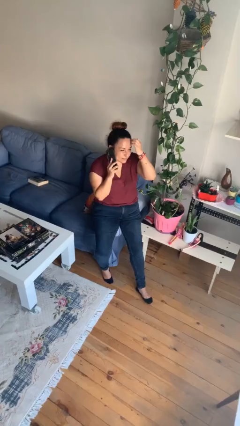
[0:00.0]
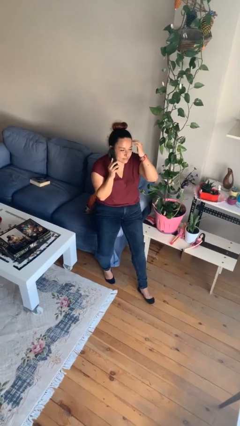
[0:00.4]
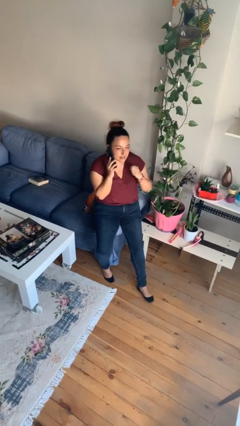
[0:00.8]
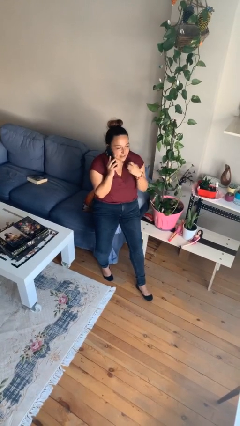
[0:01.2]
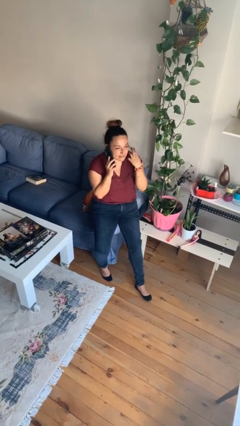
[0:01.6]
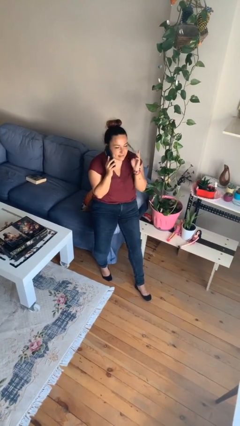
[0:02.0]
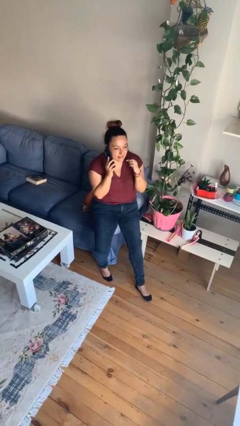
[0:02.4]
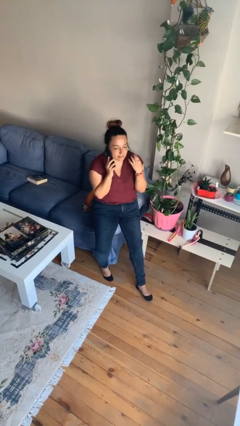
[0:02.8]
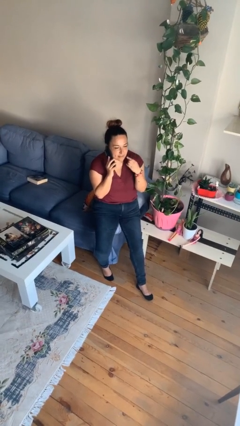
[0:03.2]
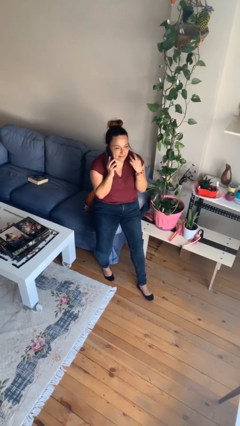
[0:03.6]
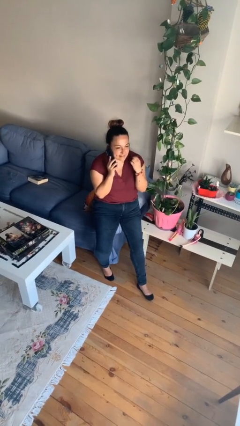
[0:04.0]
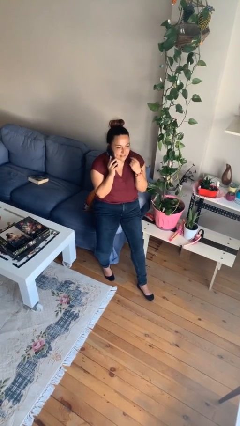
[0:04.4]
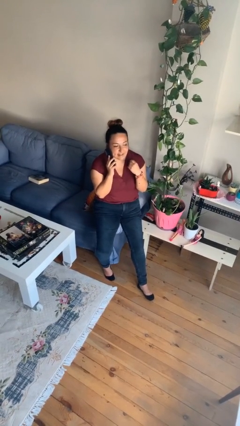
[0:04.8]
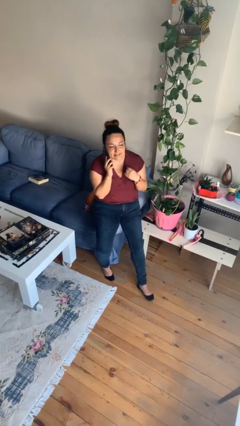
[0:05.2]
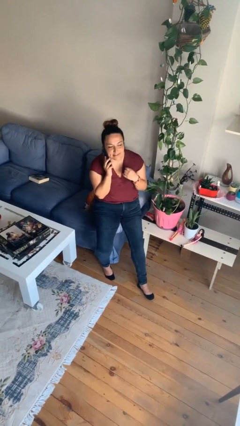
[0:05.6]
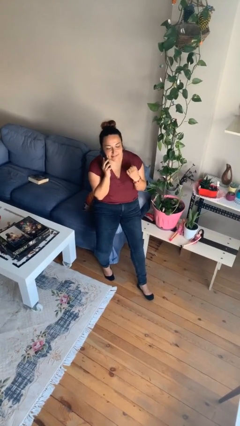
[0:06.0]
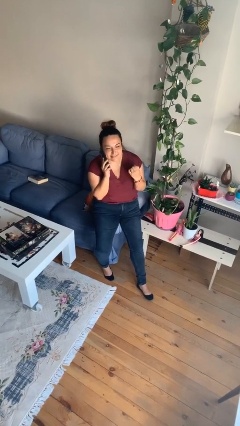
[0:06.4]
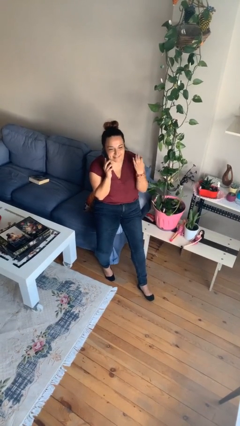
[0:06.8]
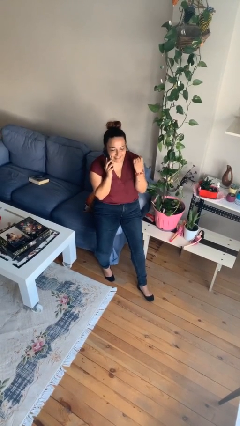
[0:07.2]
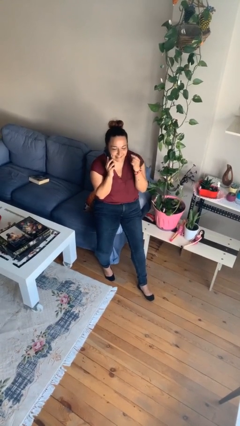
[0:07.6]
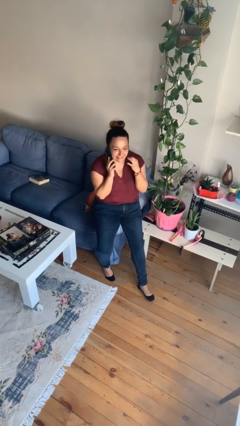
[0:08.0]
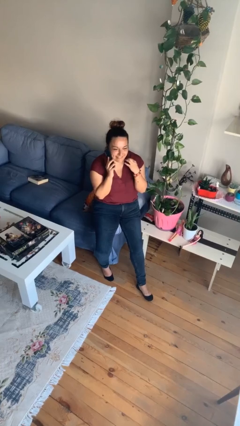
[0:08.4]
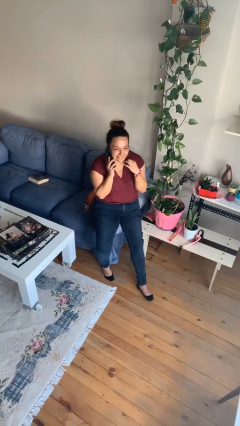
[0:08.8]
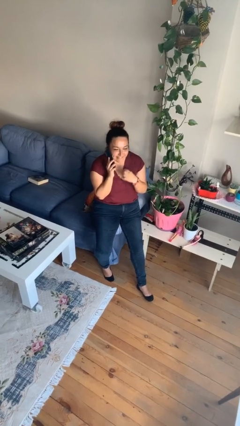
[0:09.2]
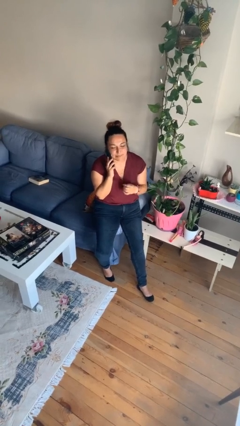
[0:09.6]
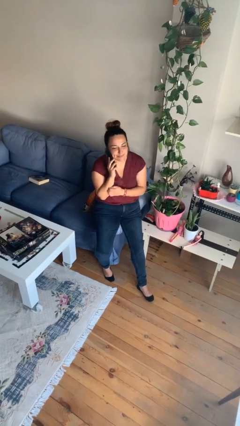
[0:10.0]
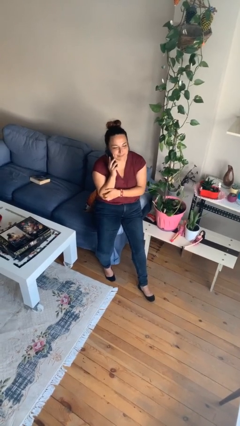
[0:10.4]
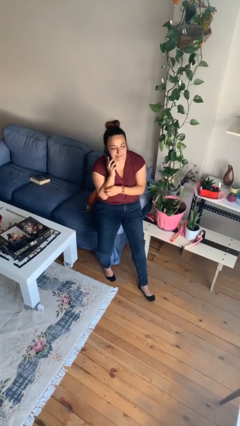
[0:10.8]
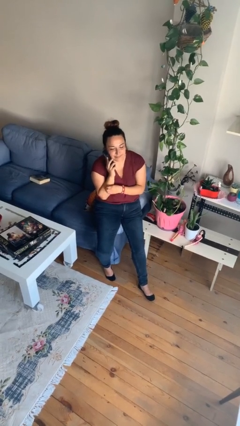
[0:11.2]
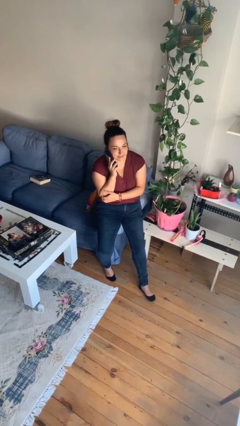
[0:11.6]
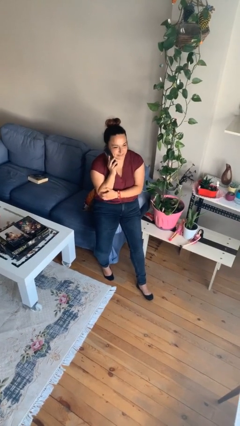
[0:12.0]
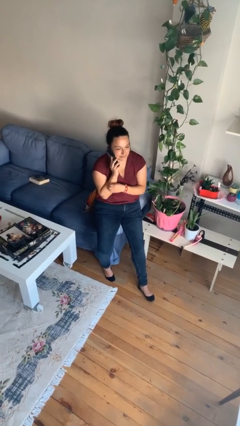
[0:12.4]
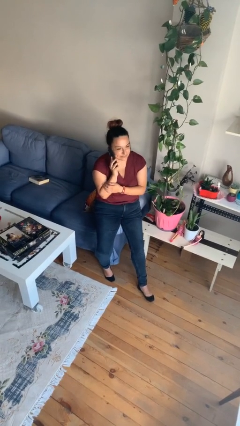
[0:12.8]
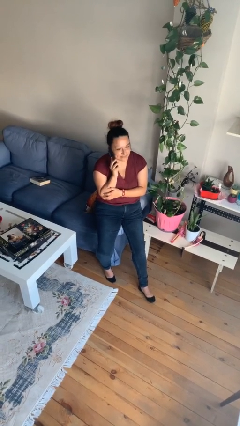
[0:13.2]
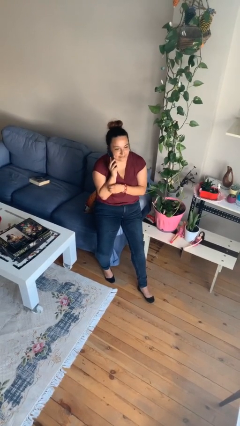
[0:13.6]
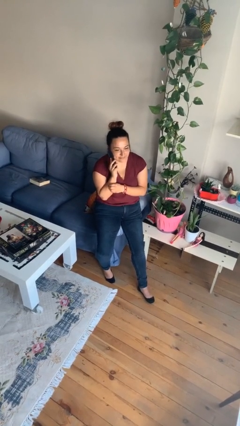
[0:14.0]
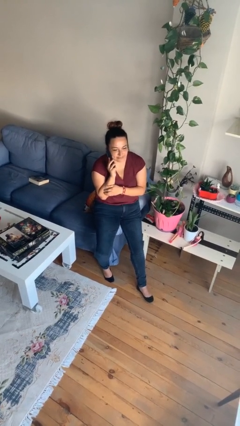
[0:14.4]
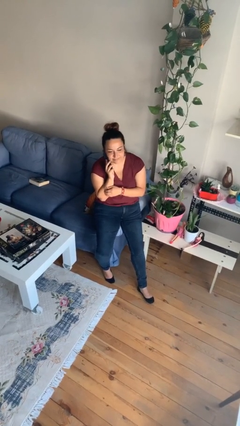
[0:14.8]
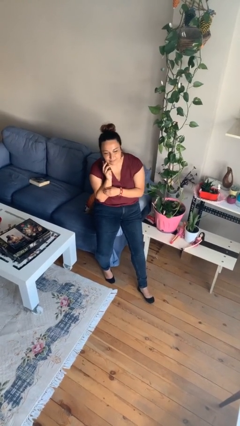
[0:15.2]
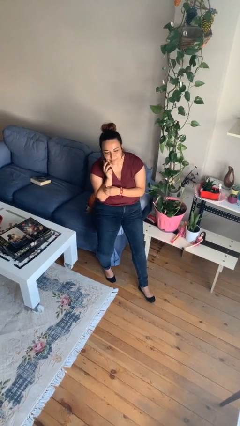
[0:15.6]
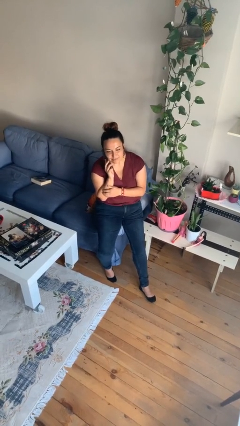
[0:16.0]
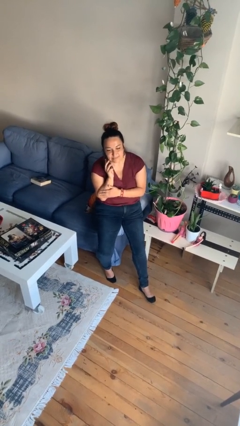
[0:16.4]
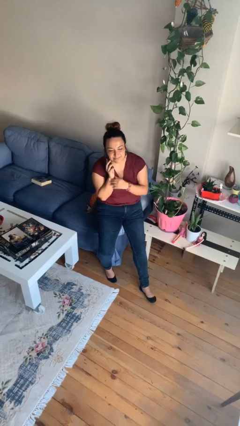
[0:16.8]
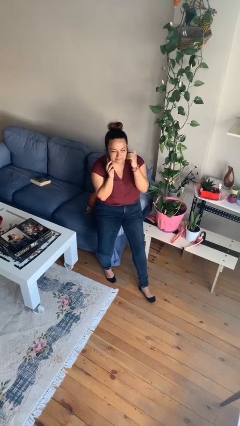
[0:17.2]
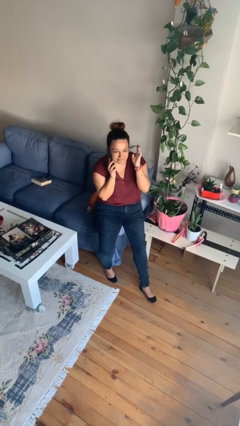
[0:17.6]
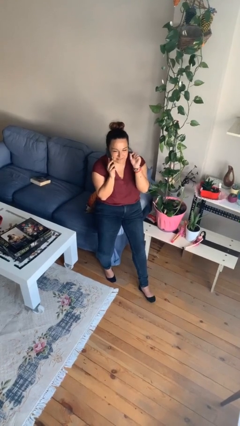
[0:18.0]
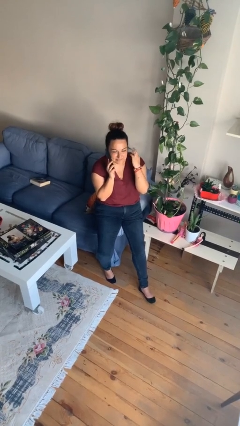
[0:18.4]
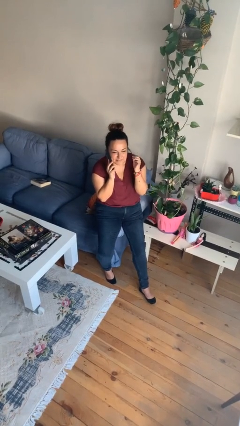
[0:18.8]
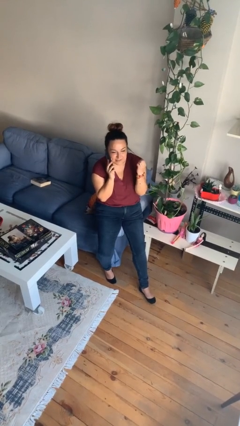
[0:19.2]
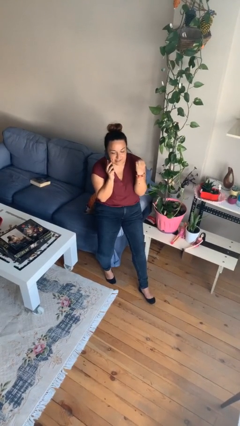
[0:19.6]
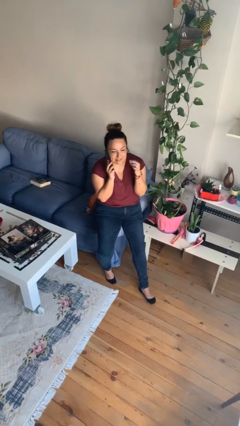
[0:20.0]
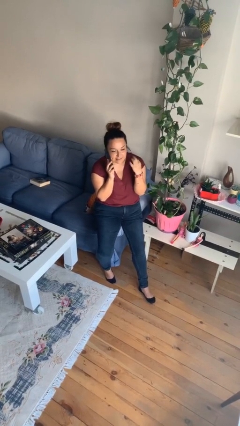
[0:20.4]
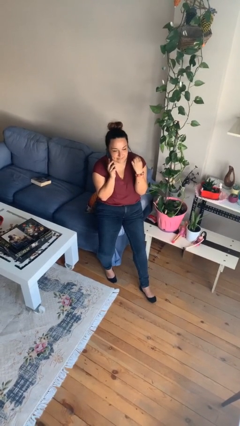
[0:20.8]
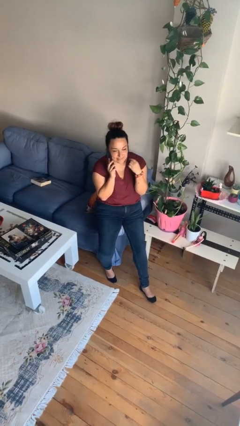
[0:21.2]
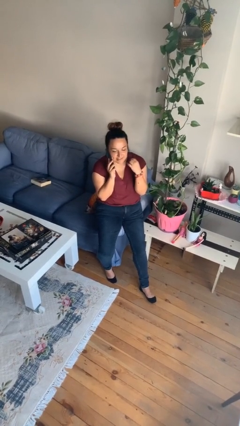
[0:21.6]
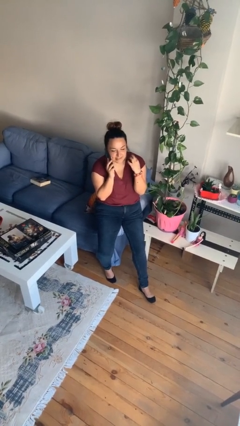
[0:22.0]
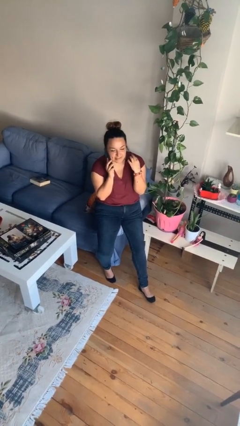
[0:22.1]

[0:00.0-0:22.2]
person talks on phone

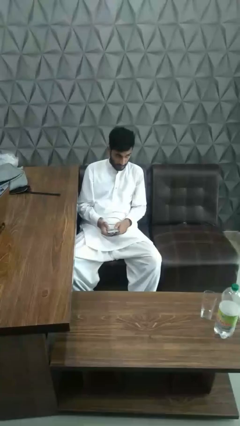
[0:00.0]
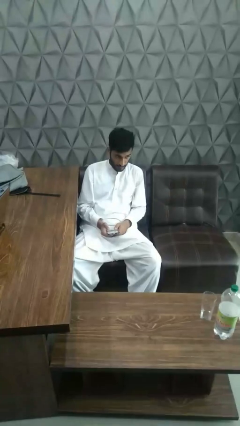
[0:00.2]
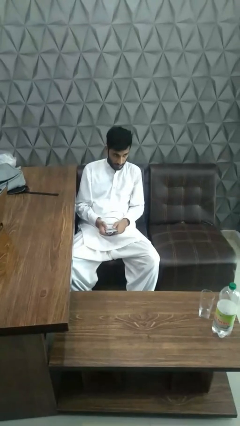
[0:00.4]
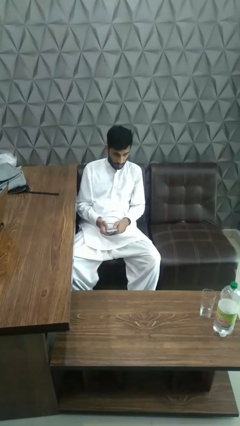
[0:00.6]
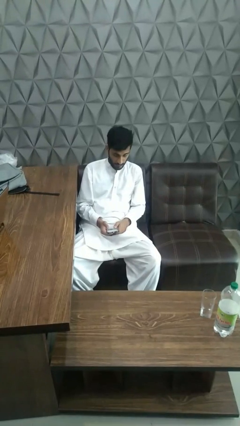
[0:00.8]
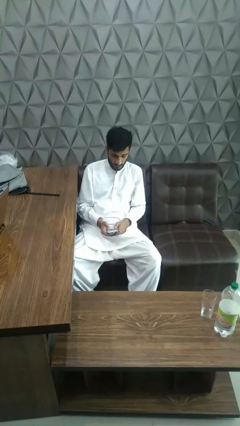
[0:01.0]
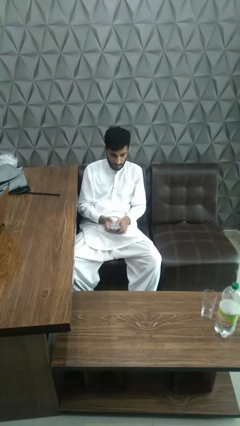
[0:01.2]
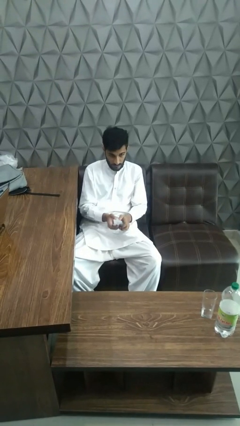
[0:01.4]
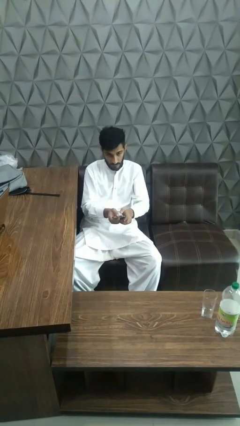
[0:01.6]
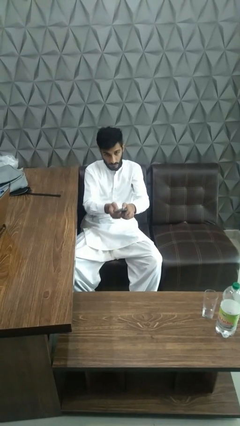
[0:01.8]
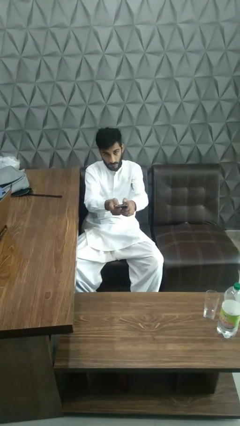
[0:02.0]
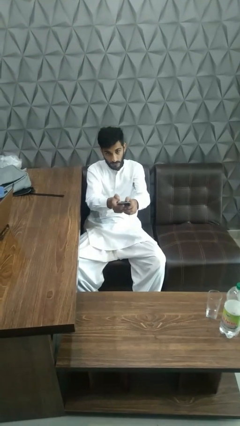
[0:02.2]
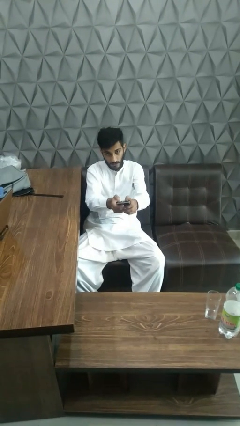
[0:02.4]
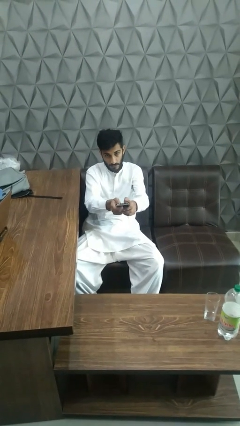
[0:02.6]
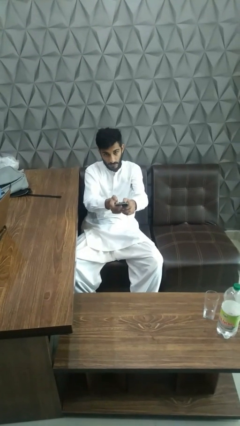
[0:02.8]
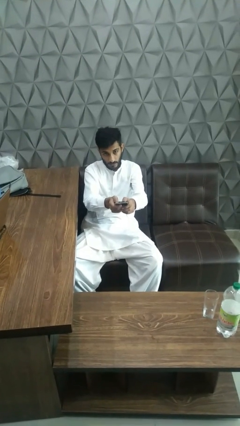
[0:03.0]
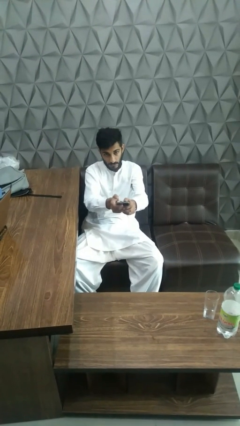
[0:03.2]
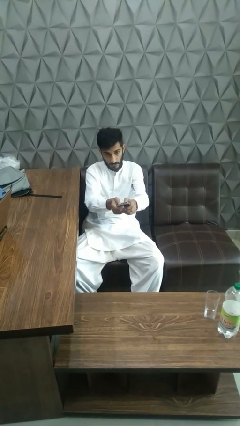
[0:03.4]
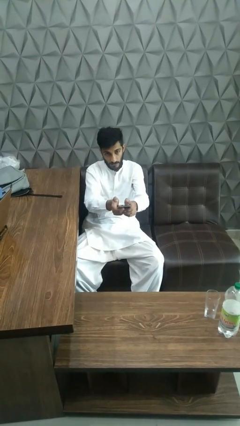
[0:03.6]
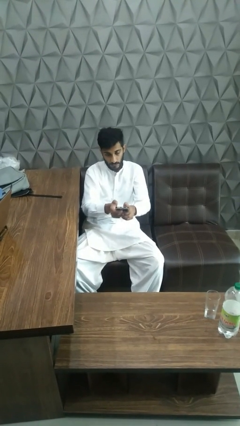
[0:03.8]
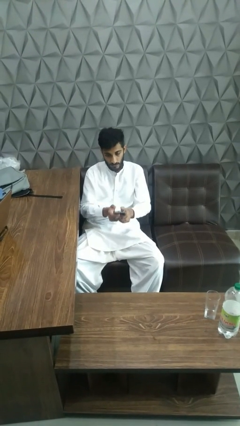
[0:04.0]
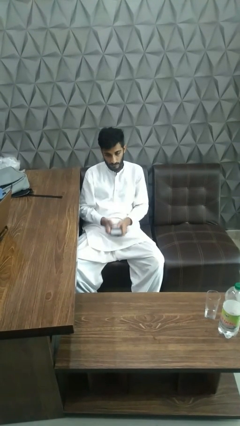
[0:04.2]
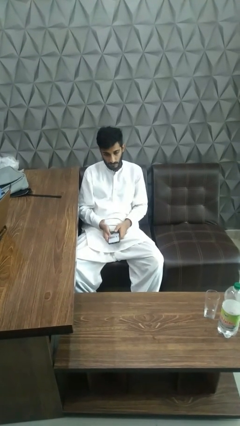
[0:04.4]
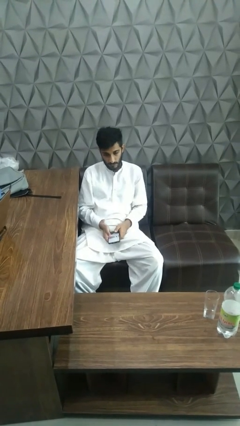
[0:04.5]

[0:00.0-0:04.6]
person uses television remote

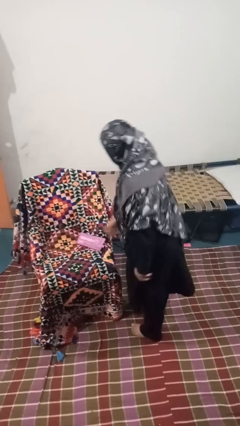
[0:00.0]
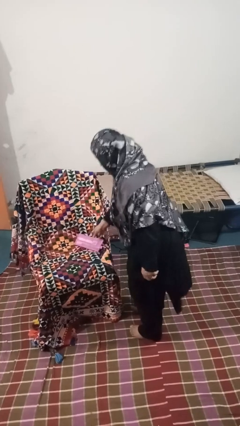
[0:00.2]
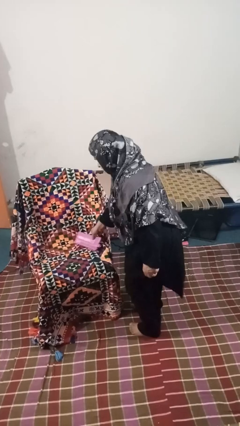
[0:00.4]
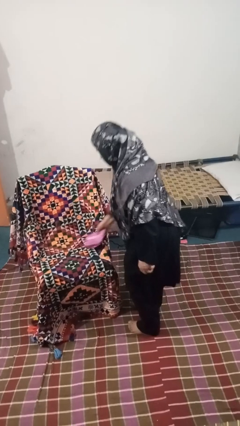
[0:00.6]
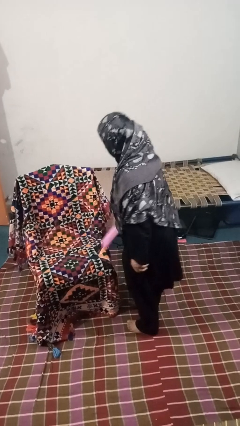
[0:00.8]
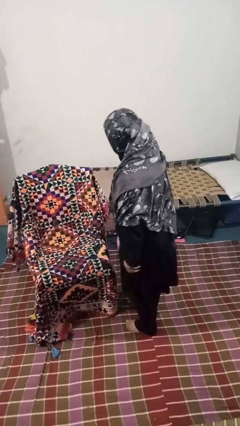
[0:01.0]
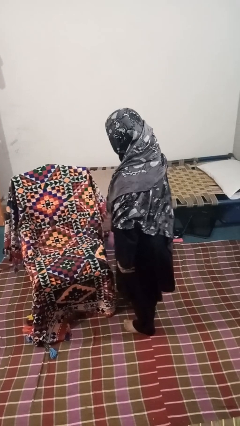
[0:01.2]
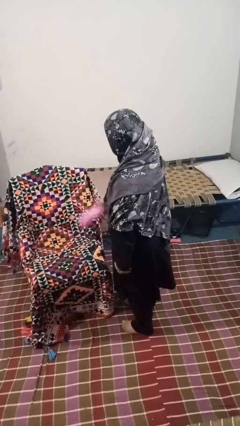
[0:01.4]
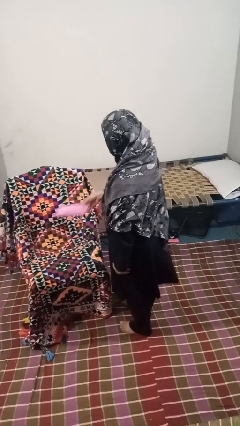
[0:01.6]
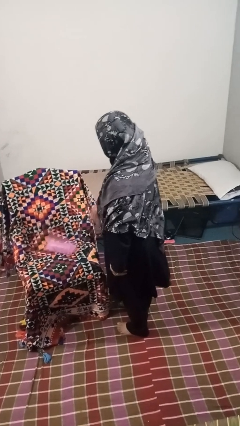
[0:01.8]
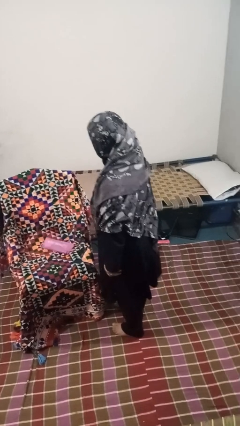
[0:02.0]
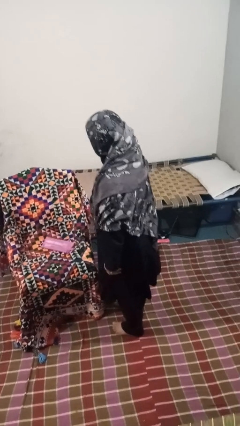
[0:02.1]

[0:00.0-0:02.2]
person picks up object from couch
